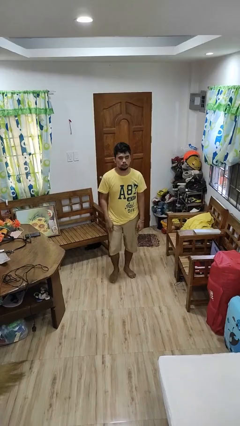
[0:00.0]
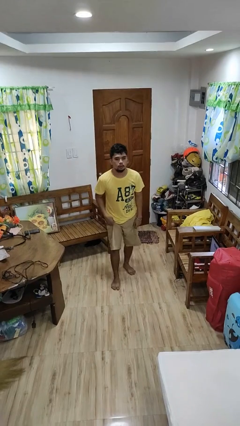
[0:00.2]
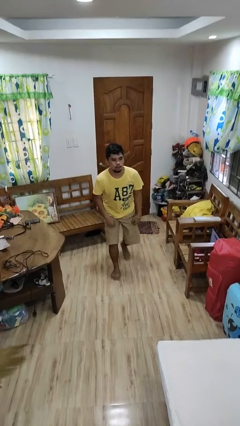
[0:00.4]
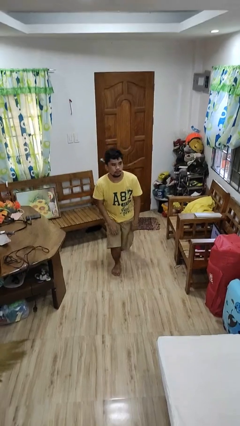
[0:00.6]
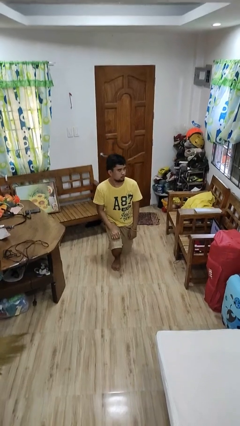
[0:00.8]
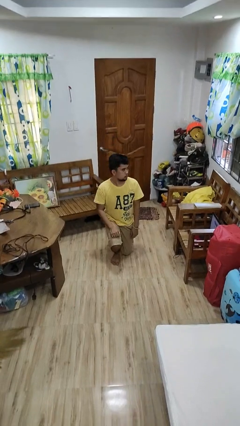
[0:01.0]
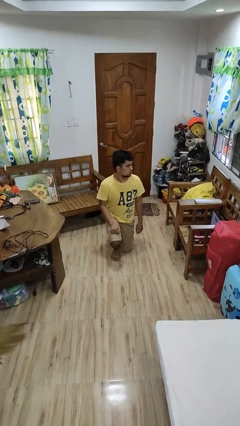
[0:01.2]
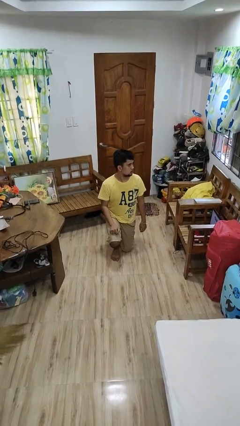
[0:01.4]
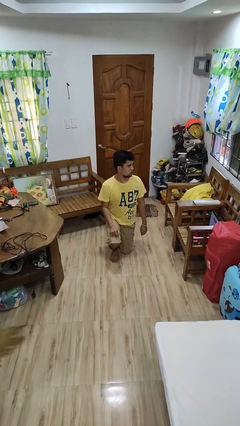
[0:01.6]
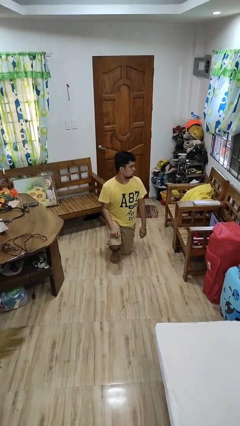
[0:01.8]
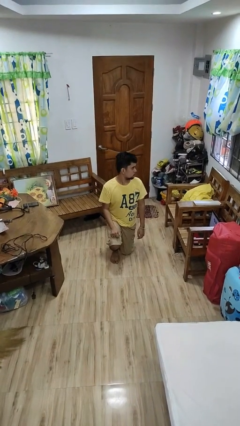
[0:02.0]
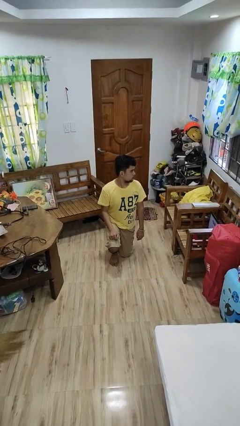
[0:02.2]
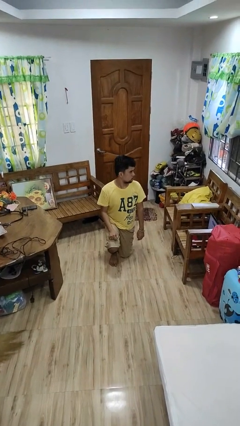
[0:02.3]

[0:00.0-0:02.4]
person kneels

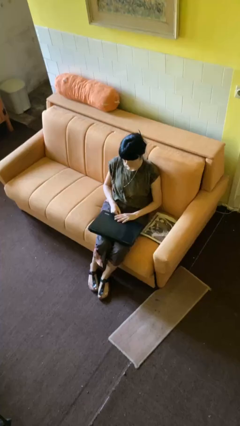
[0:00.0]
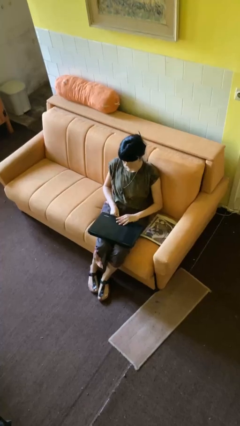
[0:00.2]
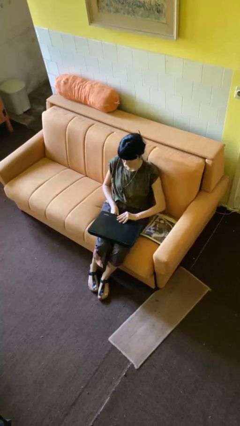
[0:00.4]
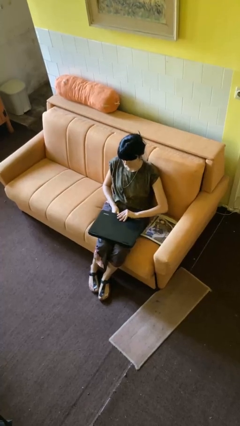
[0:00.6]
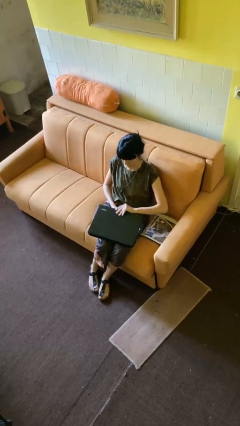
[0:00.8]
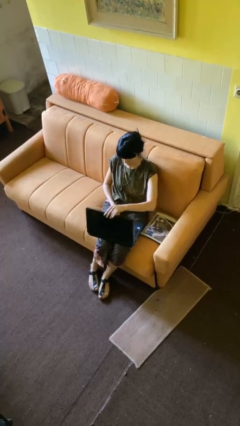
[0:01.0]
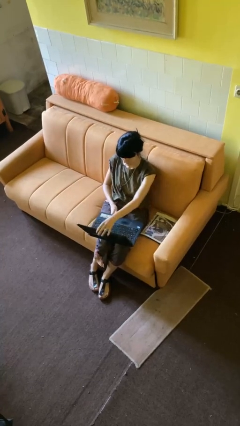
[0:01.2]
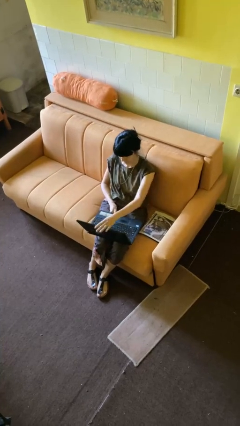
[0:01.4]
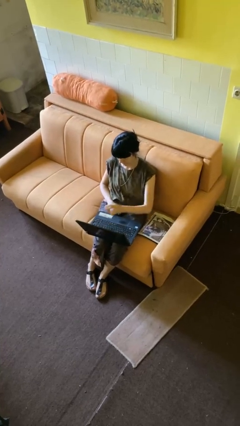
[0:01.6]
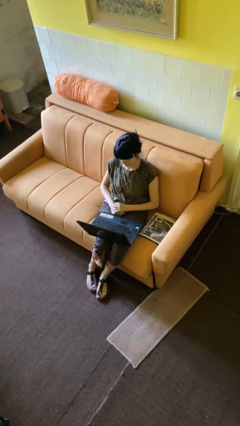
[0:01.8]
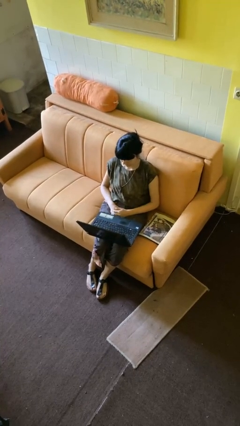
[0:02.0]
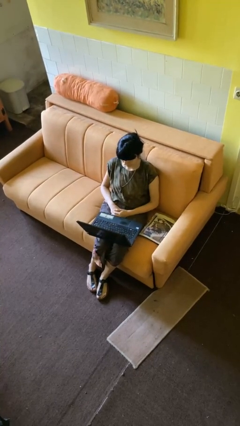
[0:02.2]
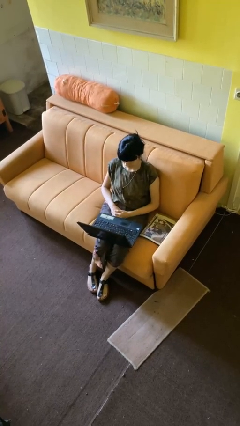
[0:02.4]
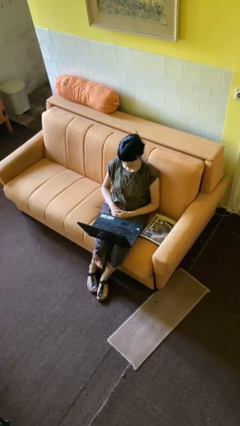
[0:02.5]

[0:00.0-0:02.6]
person opens laptop

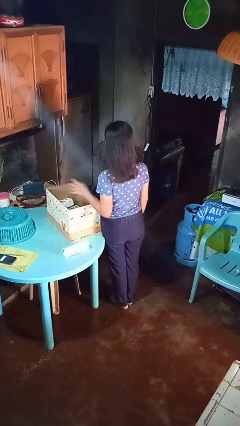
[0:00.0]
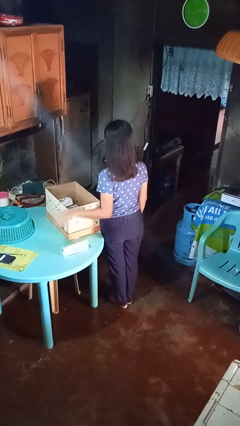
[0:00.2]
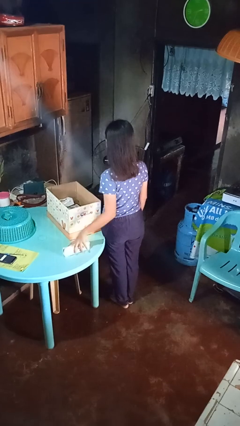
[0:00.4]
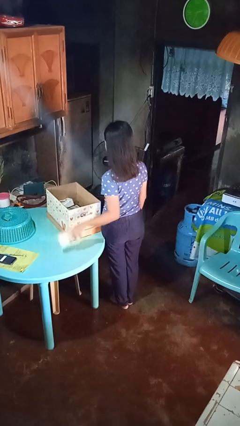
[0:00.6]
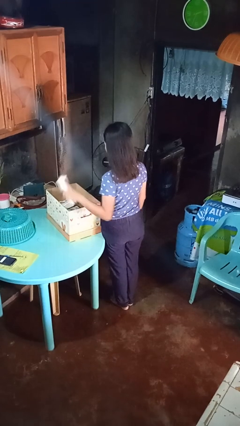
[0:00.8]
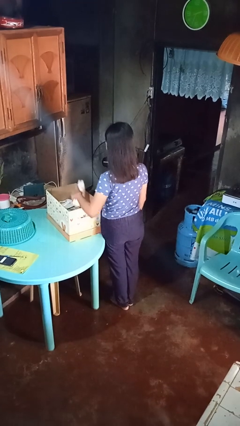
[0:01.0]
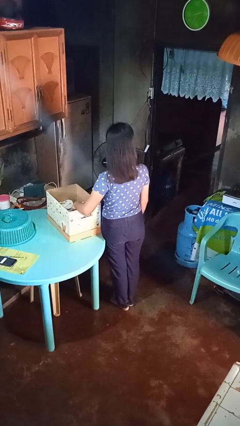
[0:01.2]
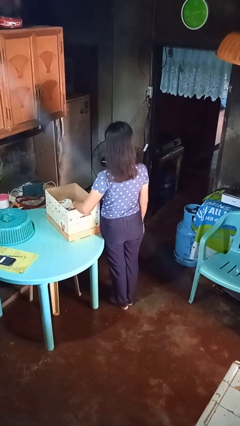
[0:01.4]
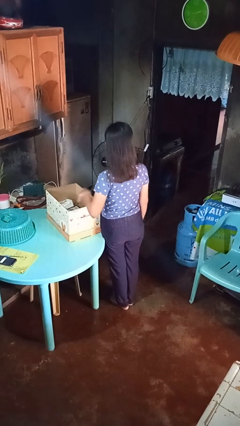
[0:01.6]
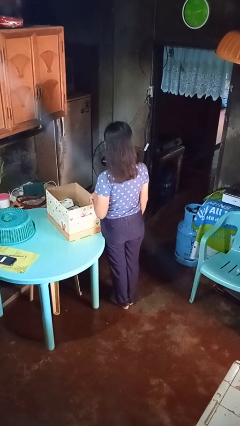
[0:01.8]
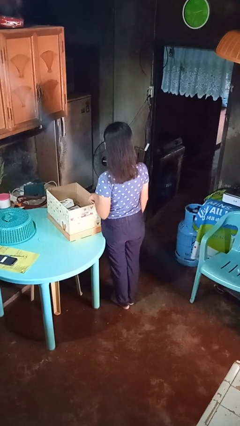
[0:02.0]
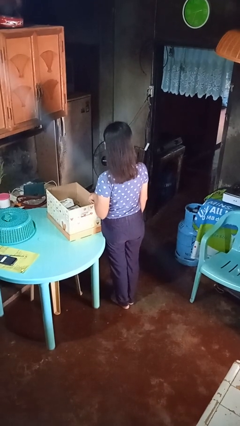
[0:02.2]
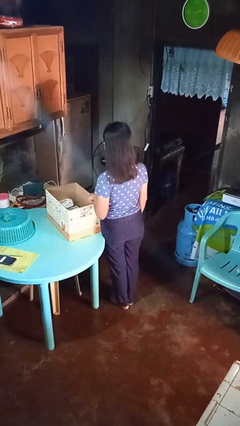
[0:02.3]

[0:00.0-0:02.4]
person puts object into box

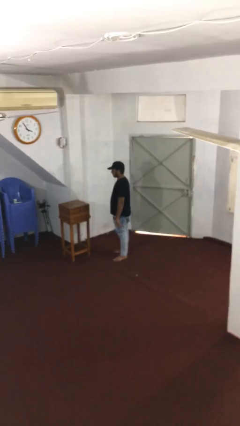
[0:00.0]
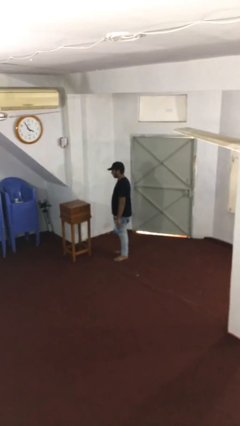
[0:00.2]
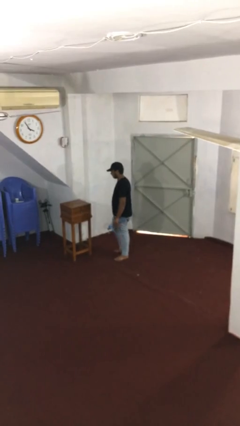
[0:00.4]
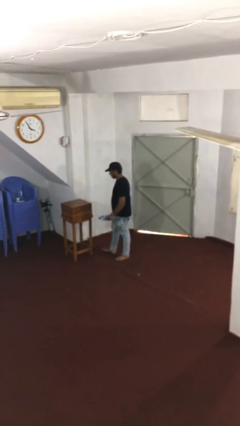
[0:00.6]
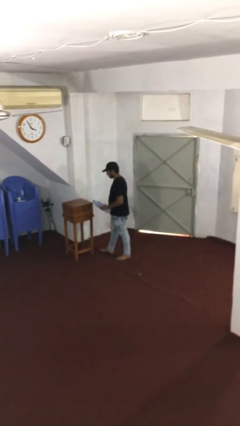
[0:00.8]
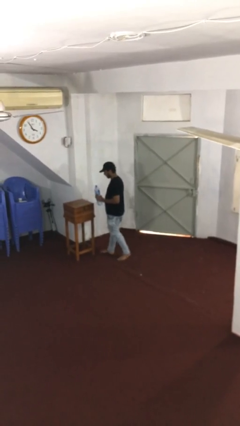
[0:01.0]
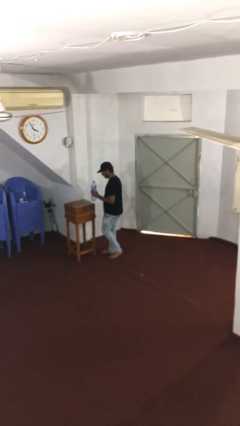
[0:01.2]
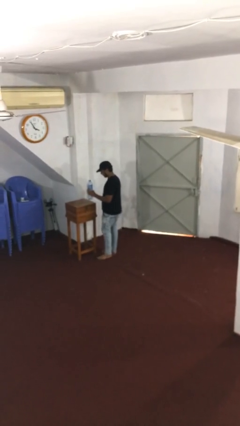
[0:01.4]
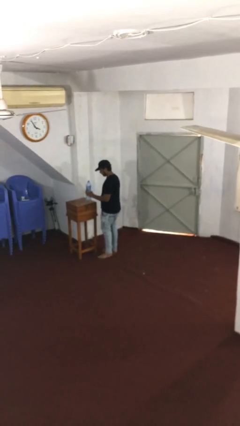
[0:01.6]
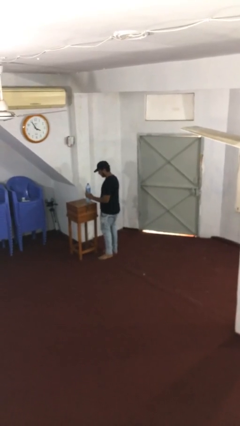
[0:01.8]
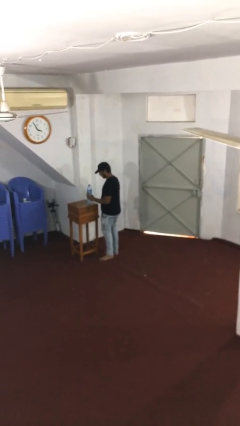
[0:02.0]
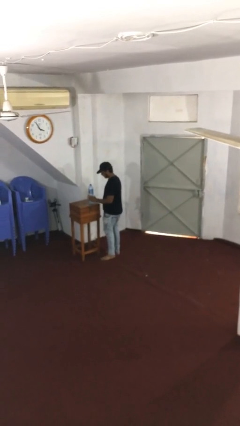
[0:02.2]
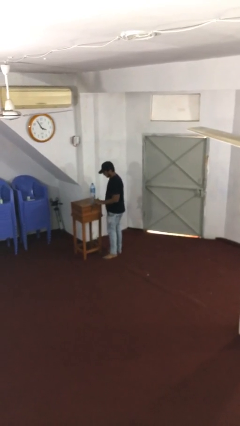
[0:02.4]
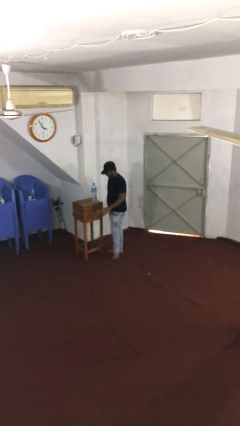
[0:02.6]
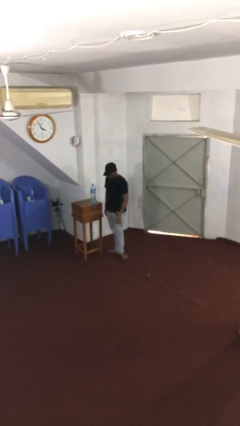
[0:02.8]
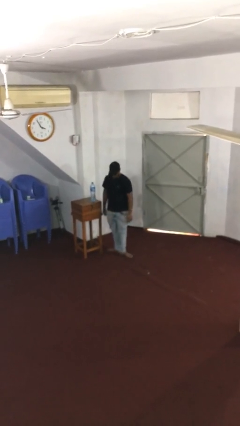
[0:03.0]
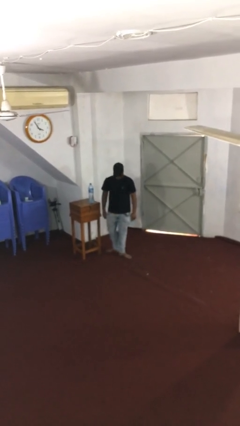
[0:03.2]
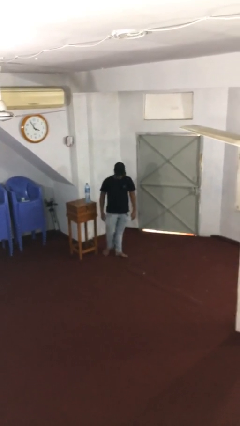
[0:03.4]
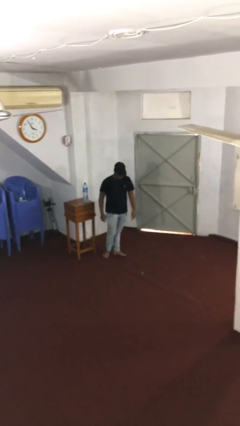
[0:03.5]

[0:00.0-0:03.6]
person puts down object on table

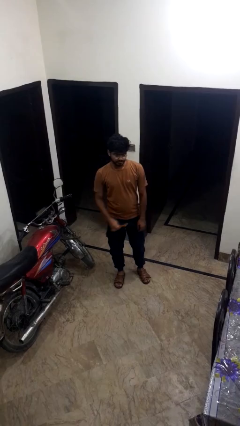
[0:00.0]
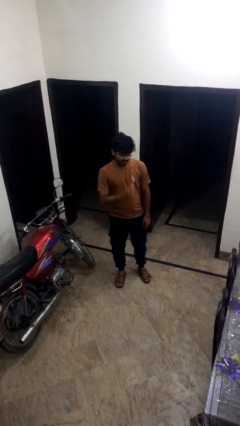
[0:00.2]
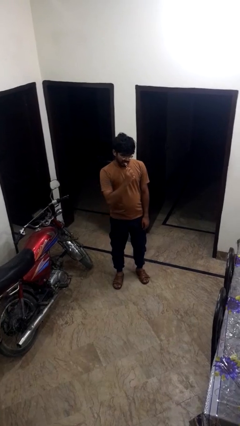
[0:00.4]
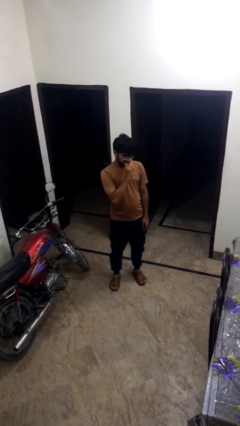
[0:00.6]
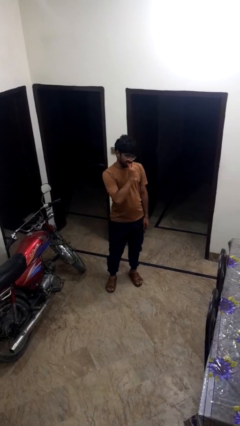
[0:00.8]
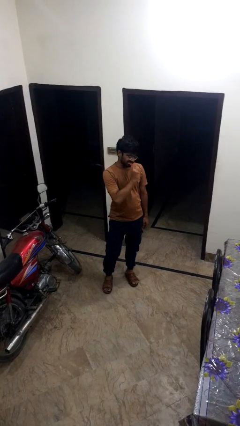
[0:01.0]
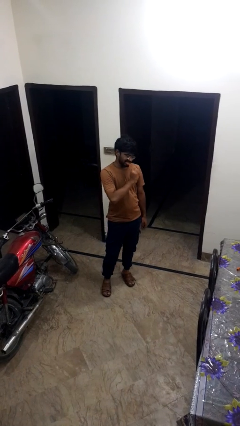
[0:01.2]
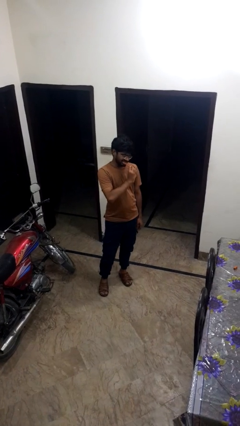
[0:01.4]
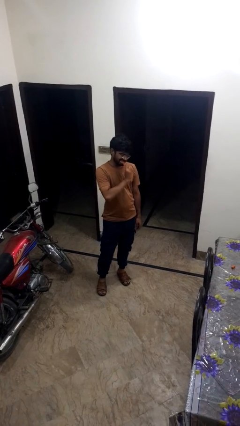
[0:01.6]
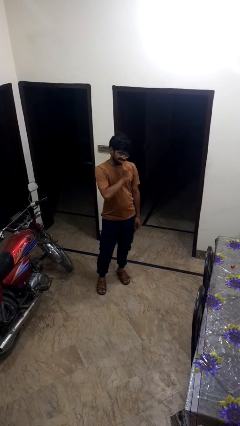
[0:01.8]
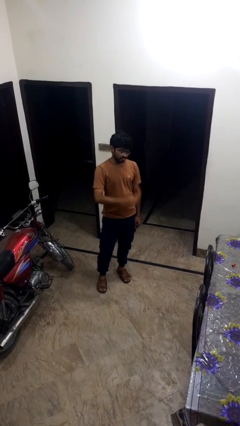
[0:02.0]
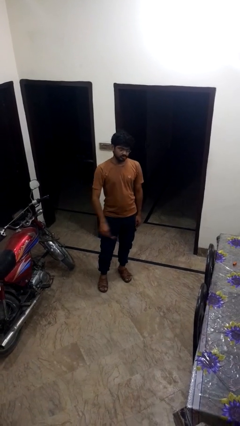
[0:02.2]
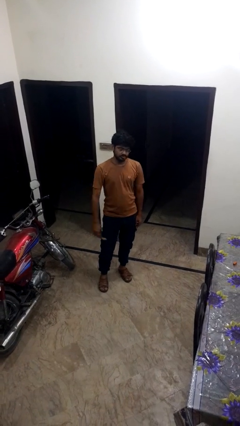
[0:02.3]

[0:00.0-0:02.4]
person brushes teeth

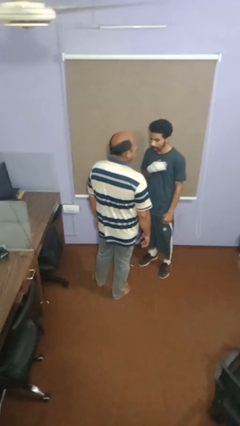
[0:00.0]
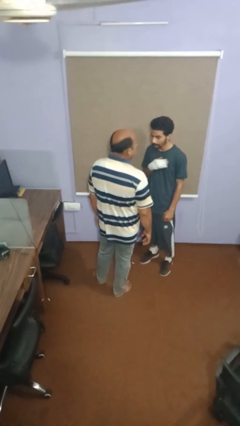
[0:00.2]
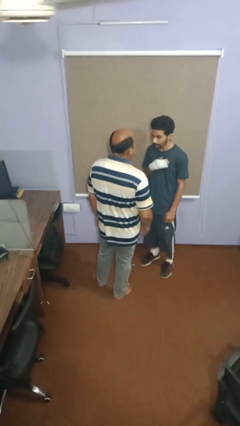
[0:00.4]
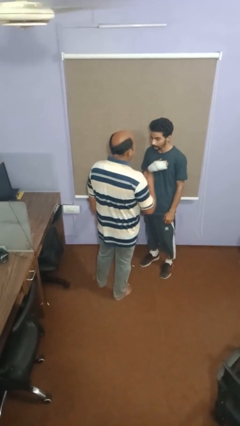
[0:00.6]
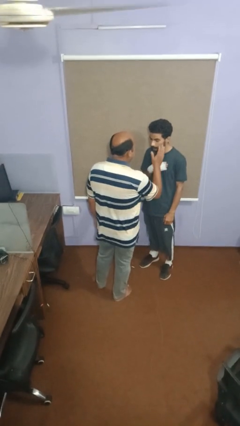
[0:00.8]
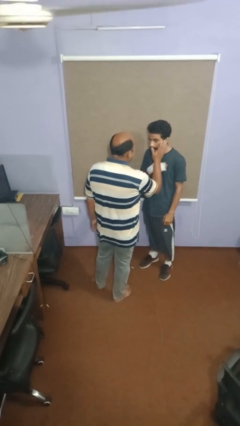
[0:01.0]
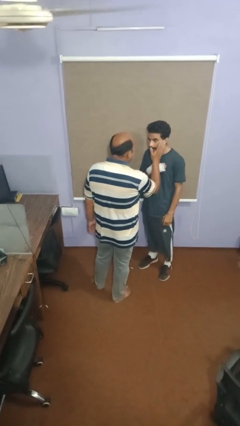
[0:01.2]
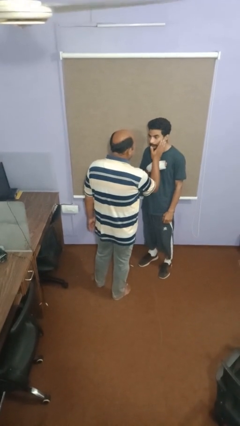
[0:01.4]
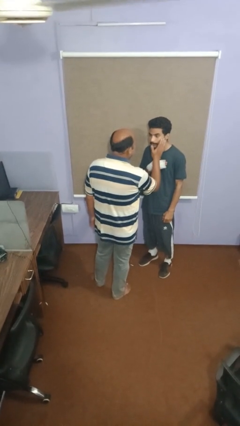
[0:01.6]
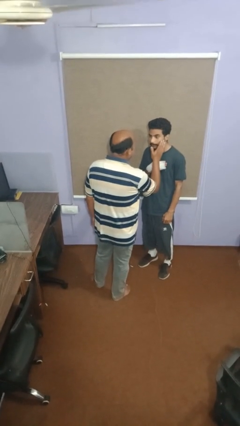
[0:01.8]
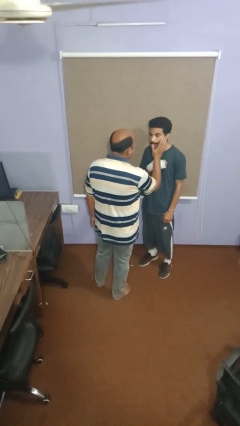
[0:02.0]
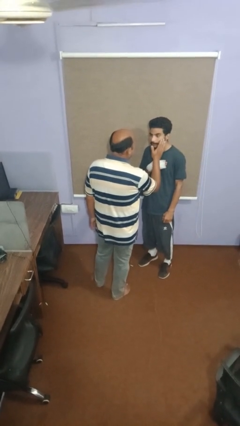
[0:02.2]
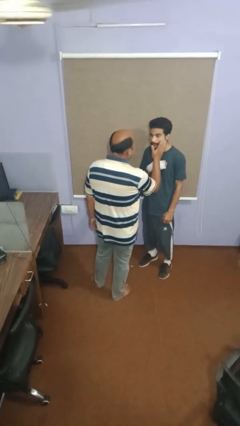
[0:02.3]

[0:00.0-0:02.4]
person touches face of person

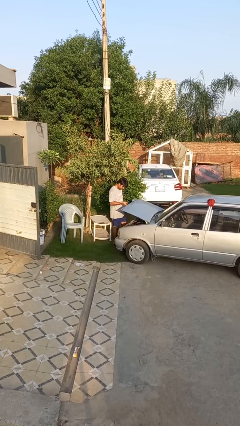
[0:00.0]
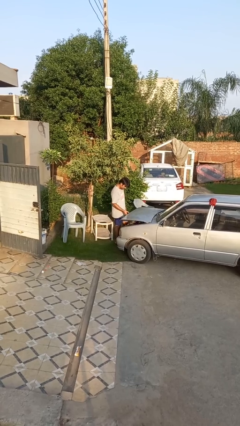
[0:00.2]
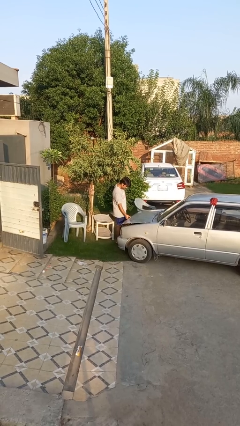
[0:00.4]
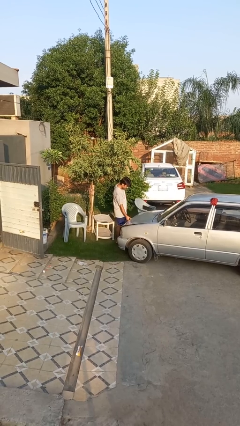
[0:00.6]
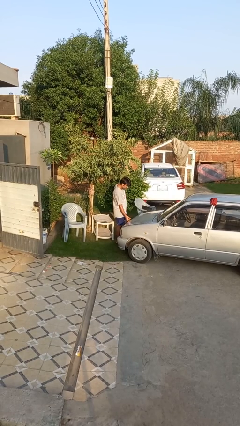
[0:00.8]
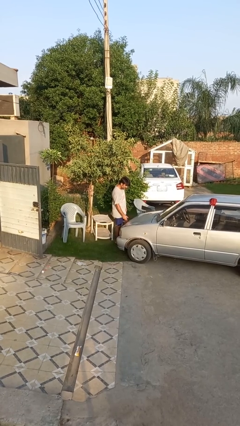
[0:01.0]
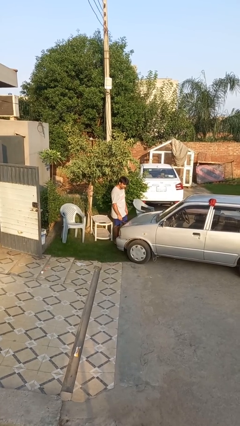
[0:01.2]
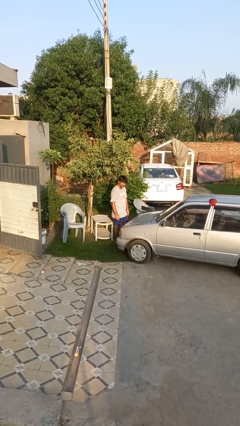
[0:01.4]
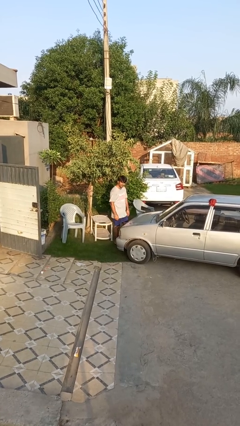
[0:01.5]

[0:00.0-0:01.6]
person closes car hood
